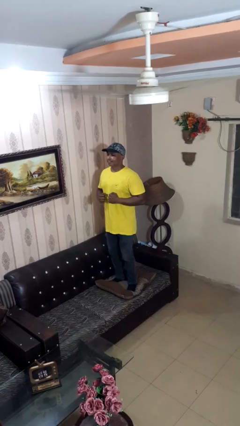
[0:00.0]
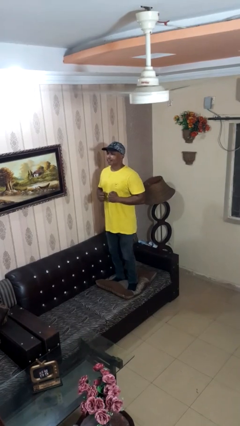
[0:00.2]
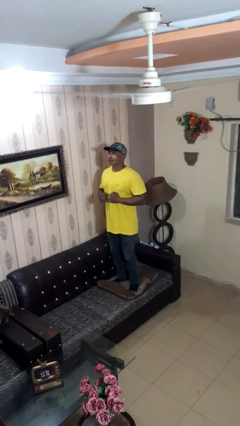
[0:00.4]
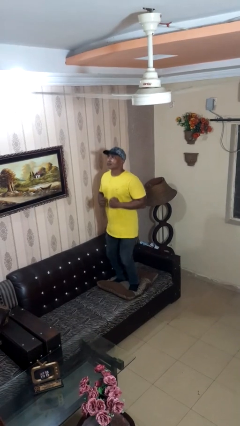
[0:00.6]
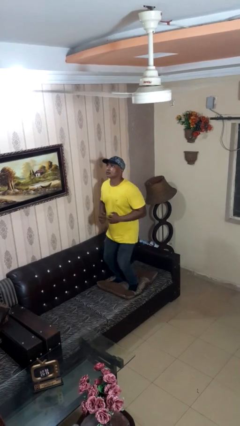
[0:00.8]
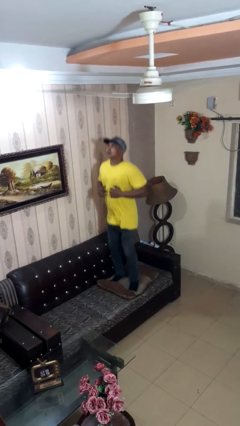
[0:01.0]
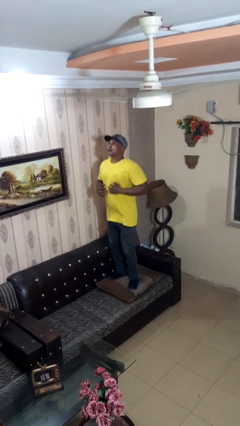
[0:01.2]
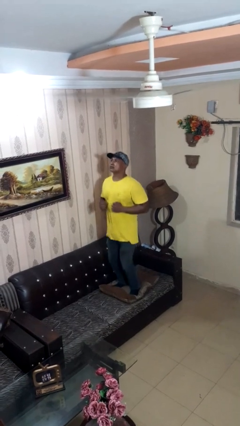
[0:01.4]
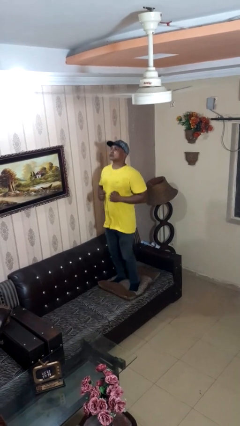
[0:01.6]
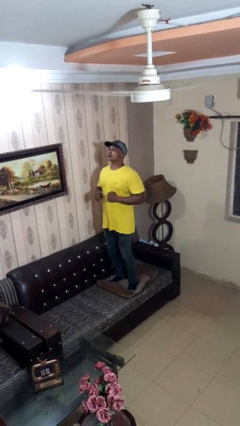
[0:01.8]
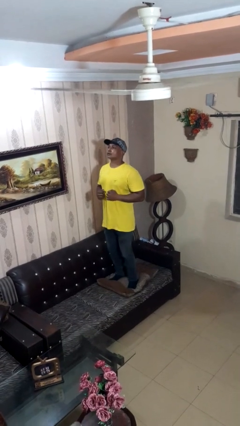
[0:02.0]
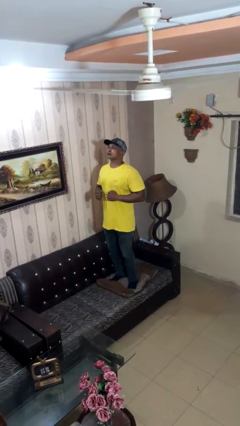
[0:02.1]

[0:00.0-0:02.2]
person jumps on couch

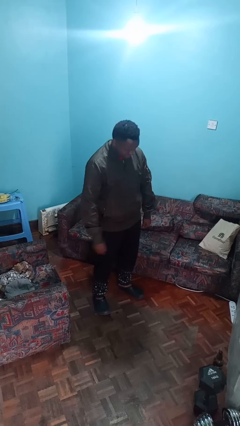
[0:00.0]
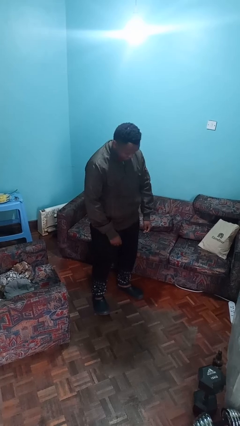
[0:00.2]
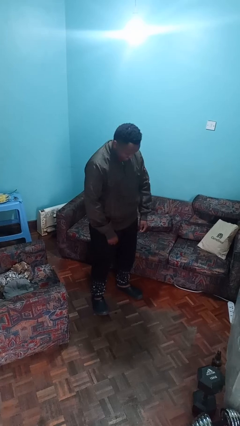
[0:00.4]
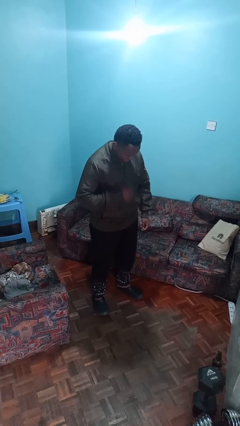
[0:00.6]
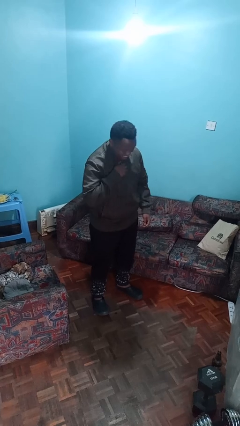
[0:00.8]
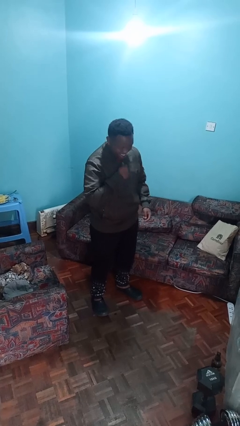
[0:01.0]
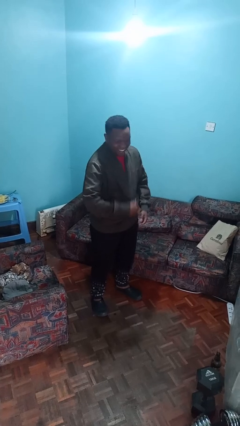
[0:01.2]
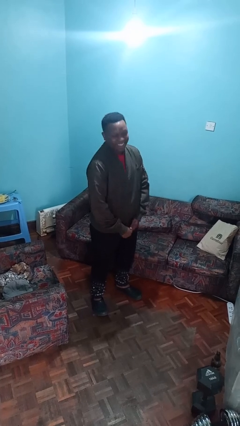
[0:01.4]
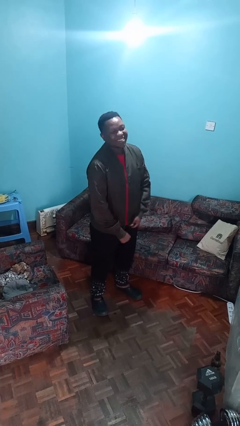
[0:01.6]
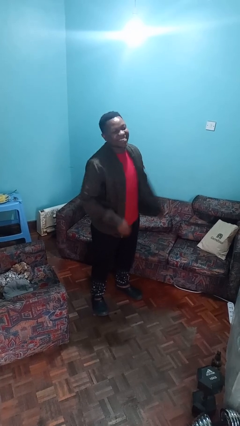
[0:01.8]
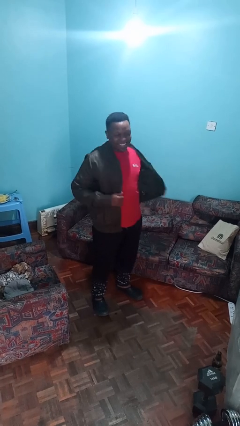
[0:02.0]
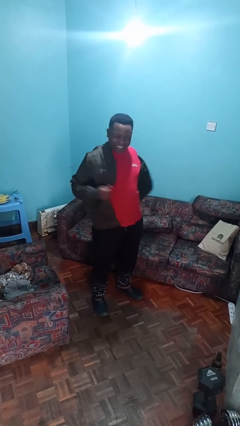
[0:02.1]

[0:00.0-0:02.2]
person unzips jacket

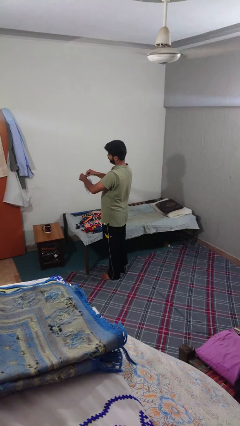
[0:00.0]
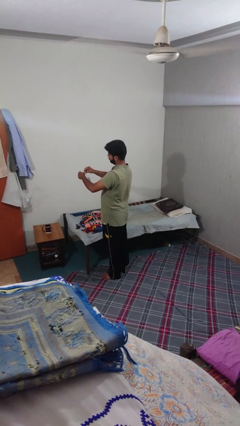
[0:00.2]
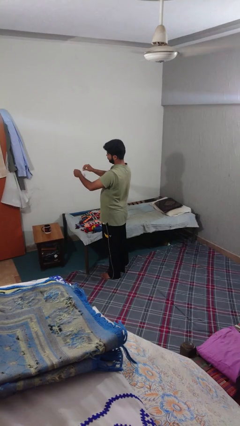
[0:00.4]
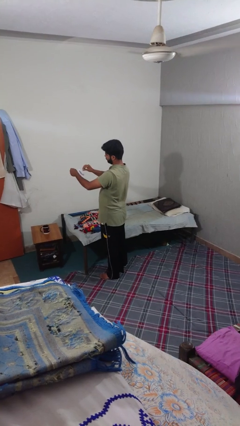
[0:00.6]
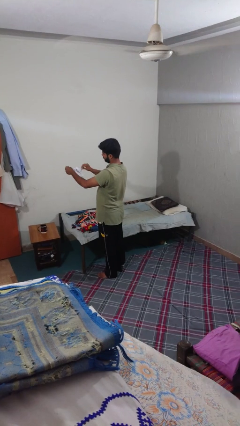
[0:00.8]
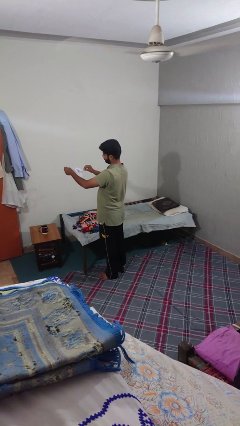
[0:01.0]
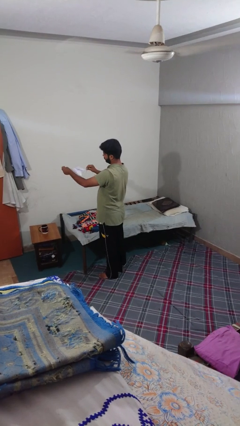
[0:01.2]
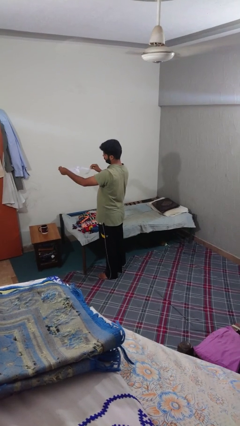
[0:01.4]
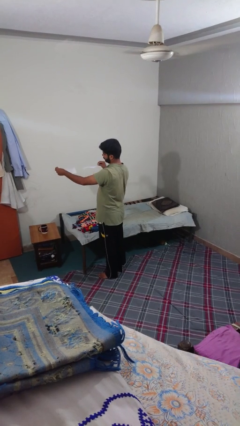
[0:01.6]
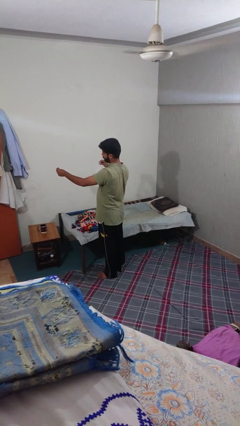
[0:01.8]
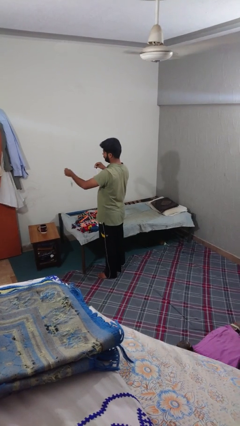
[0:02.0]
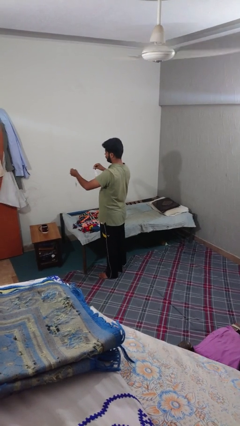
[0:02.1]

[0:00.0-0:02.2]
person tears paper

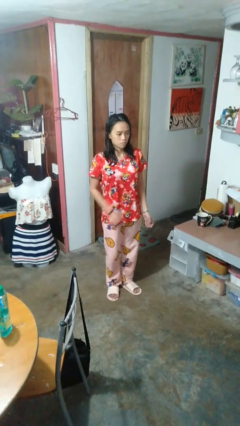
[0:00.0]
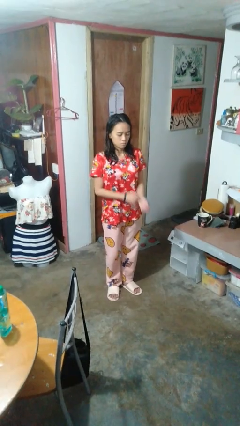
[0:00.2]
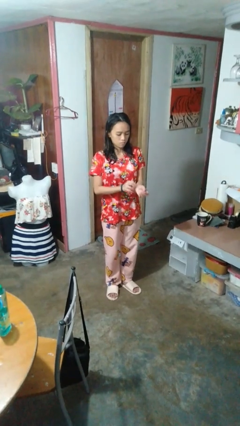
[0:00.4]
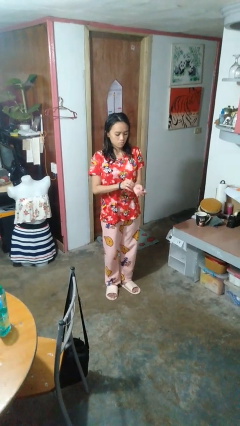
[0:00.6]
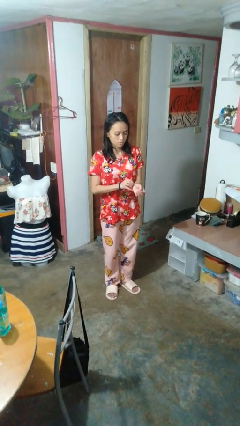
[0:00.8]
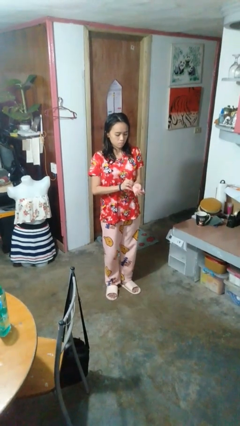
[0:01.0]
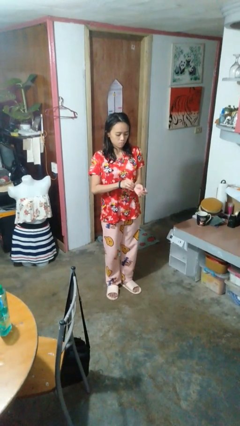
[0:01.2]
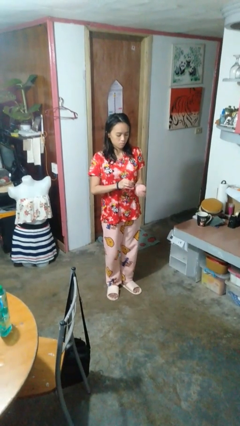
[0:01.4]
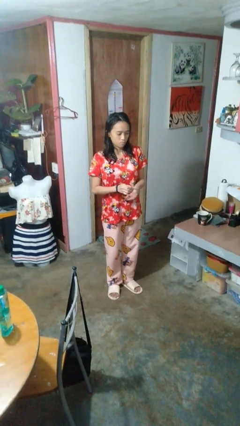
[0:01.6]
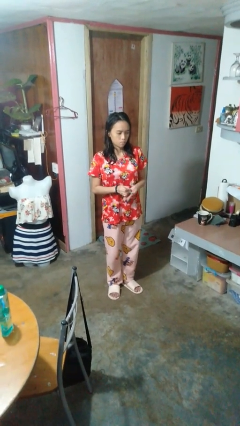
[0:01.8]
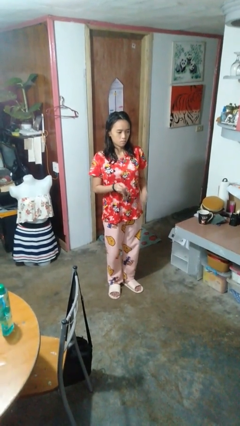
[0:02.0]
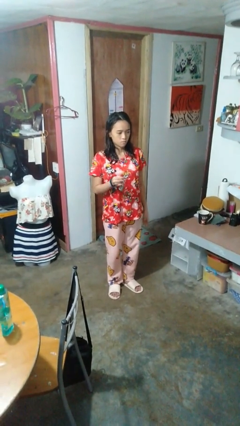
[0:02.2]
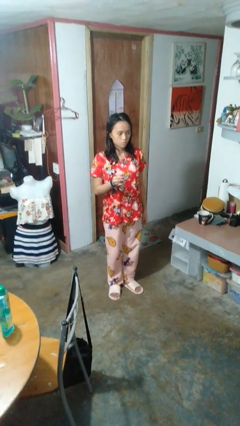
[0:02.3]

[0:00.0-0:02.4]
person takes off wristwatch

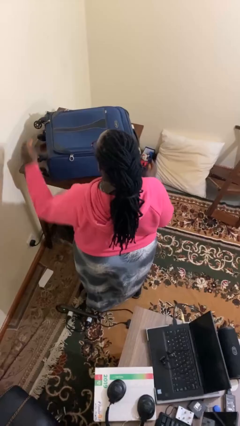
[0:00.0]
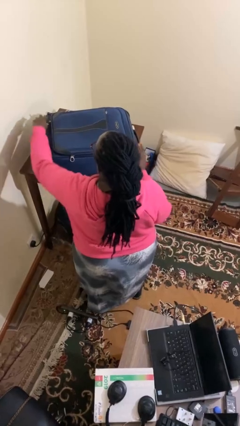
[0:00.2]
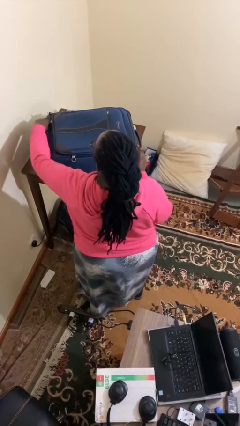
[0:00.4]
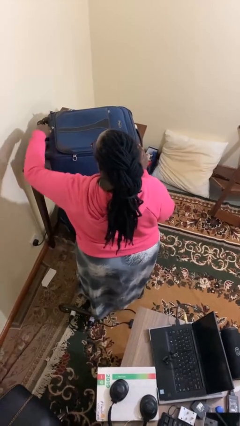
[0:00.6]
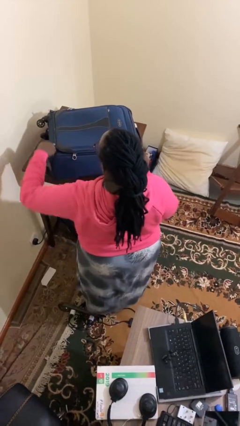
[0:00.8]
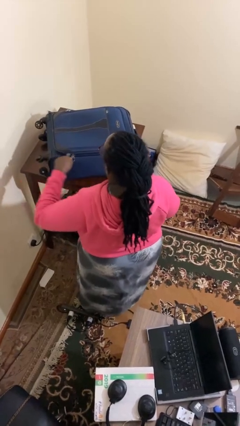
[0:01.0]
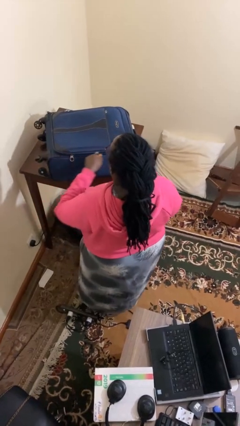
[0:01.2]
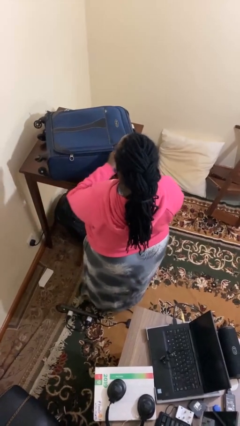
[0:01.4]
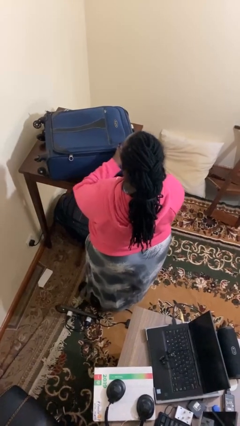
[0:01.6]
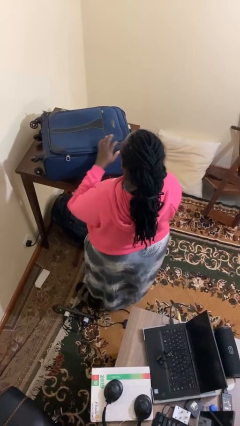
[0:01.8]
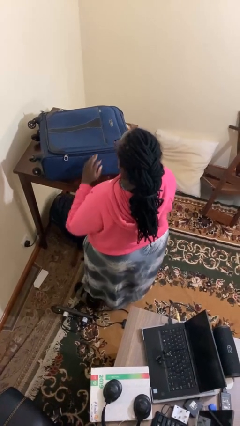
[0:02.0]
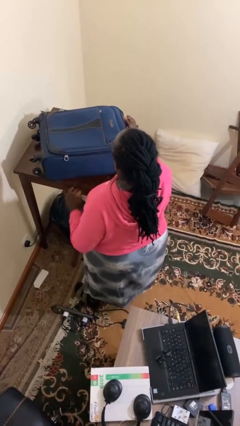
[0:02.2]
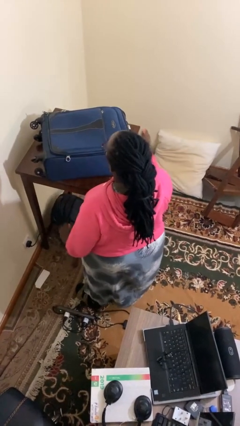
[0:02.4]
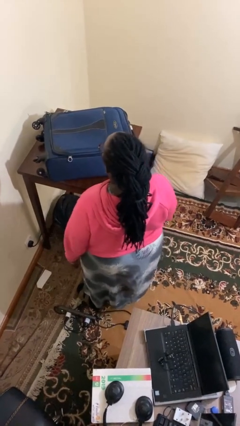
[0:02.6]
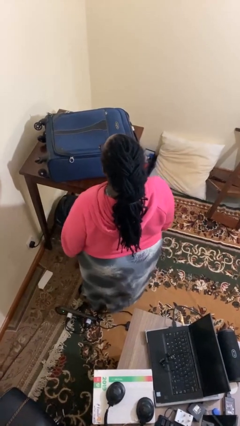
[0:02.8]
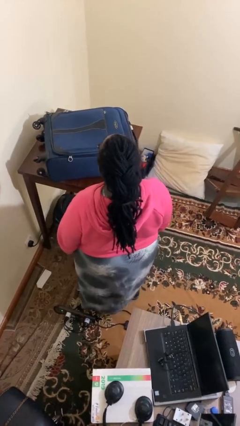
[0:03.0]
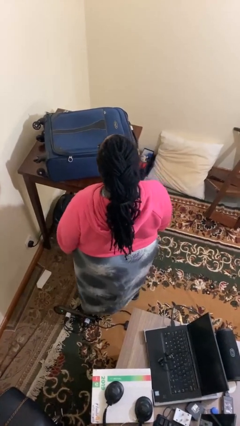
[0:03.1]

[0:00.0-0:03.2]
person takes object from kitchen drawer

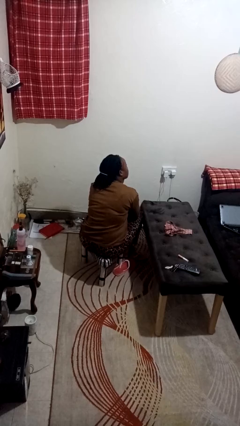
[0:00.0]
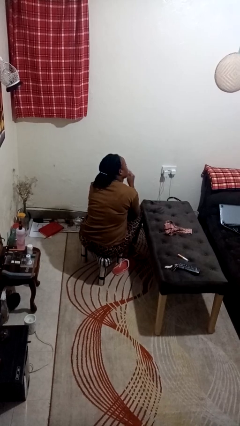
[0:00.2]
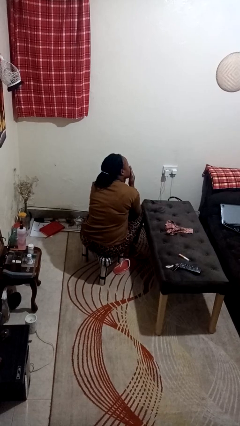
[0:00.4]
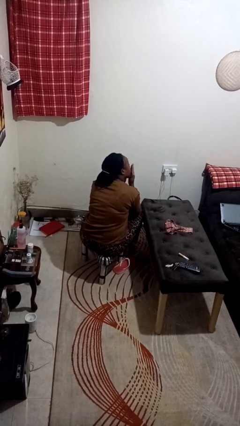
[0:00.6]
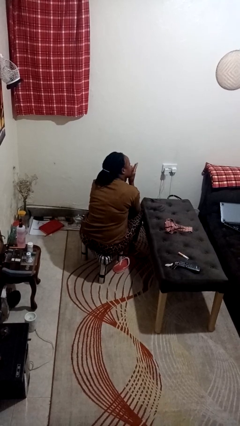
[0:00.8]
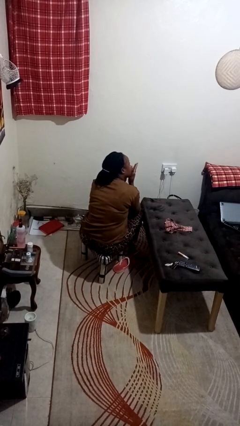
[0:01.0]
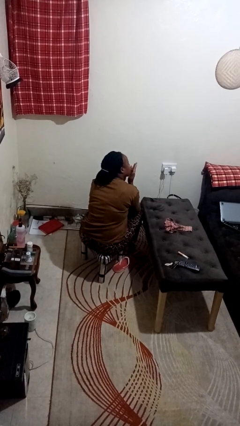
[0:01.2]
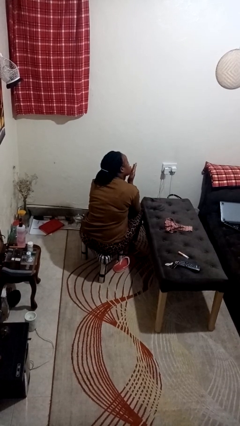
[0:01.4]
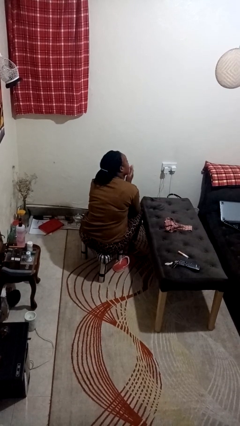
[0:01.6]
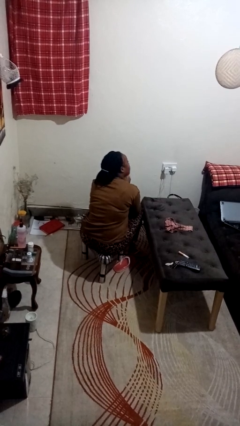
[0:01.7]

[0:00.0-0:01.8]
person gestures blow kiss

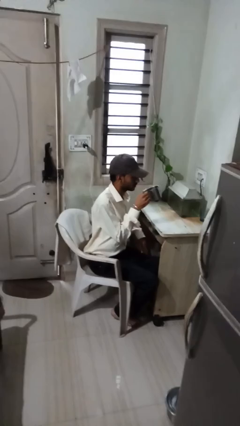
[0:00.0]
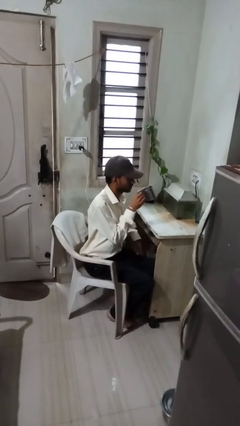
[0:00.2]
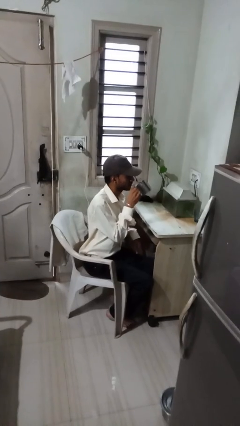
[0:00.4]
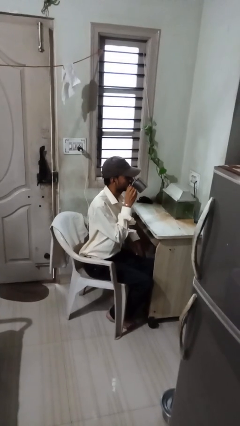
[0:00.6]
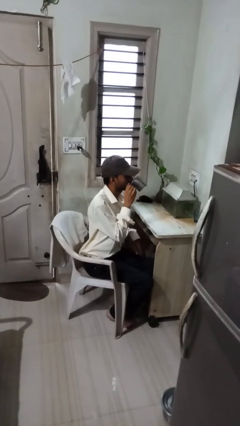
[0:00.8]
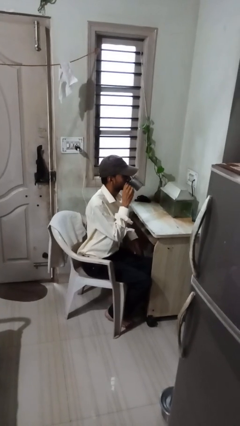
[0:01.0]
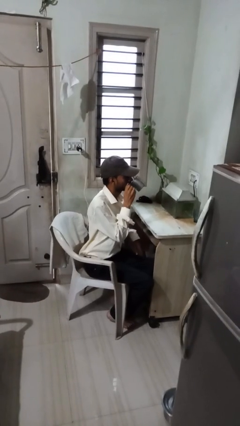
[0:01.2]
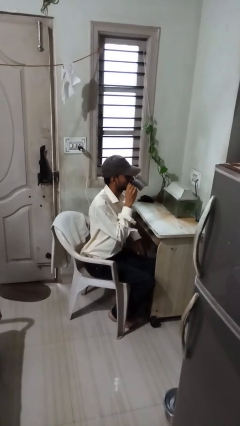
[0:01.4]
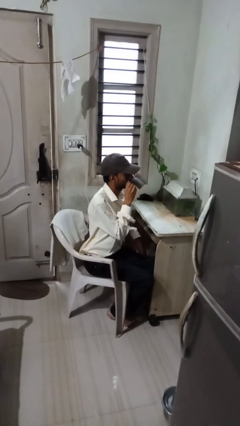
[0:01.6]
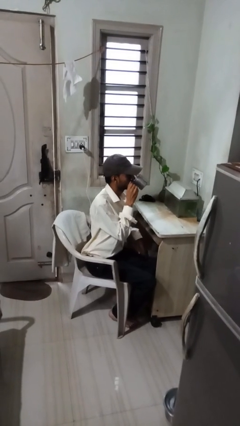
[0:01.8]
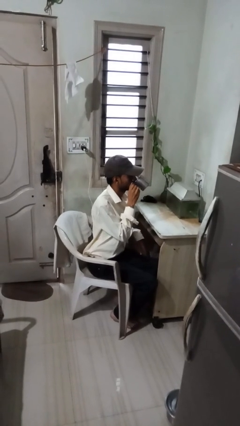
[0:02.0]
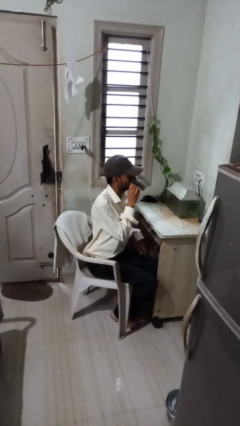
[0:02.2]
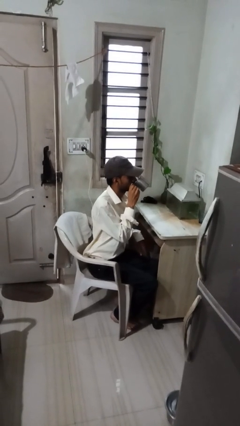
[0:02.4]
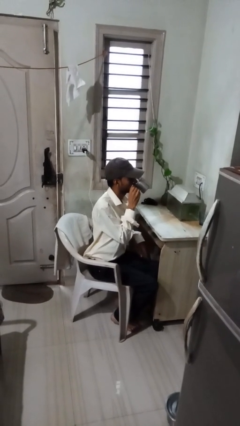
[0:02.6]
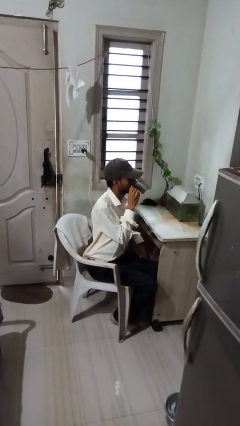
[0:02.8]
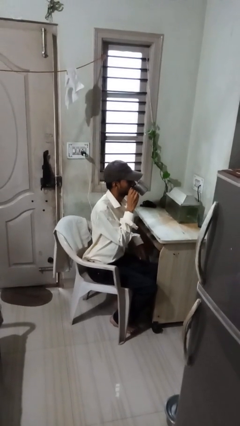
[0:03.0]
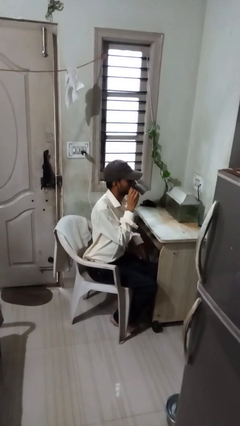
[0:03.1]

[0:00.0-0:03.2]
person drinks from mug
